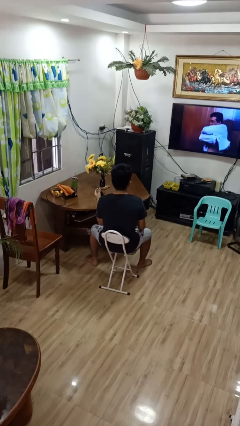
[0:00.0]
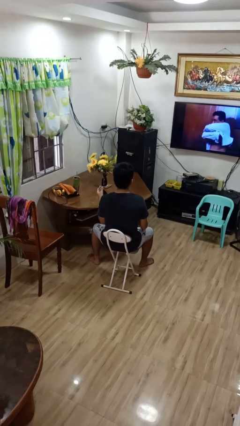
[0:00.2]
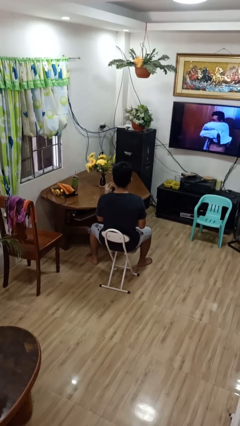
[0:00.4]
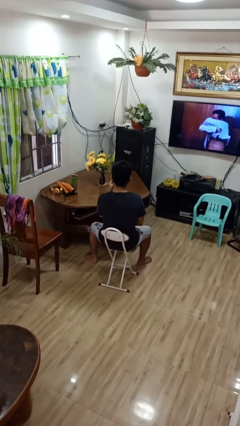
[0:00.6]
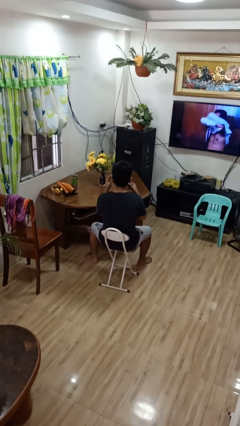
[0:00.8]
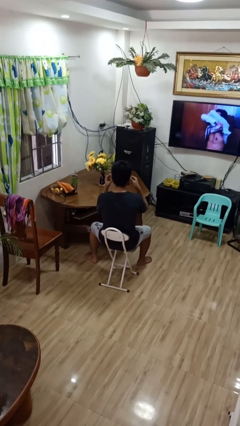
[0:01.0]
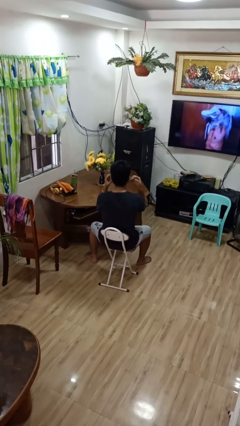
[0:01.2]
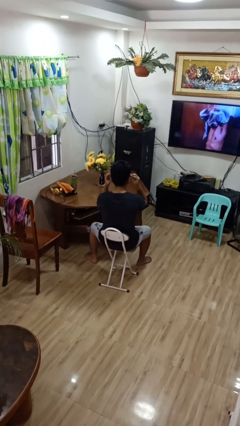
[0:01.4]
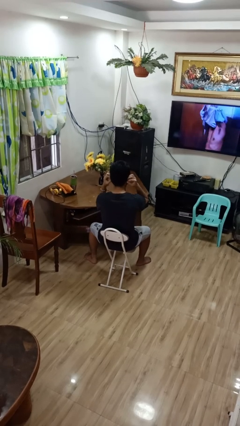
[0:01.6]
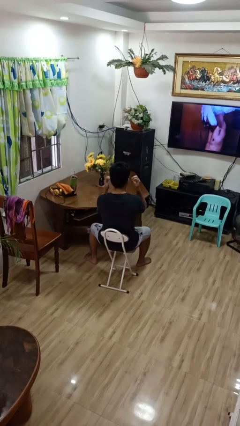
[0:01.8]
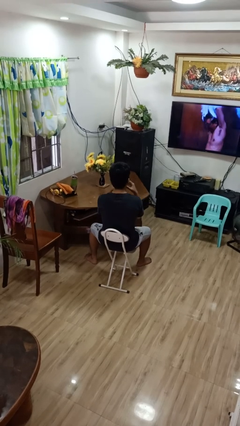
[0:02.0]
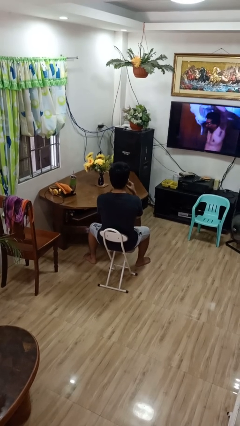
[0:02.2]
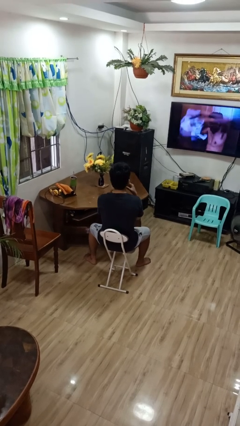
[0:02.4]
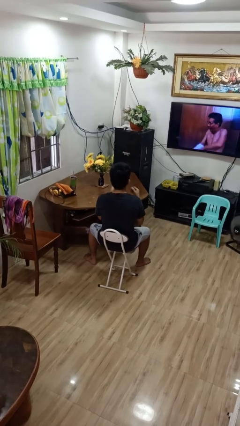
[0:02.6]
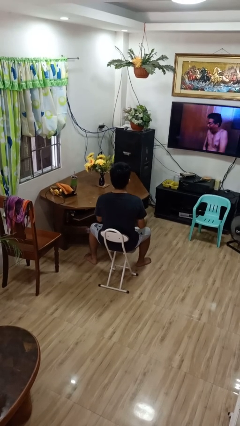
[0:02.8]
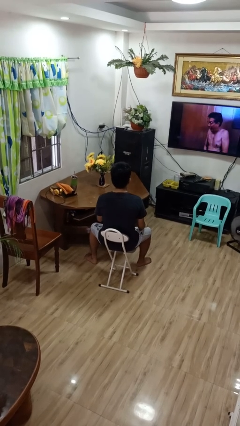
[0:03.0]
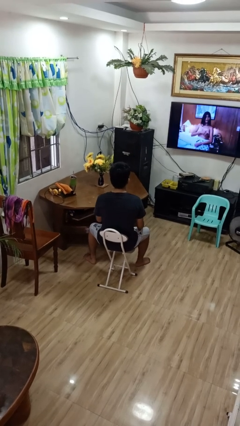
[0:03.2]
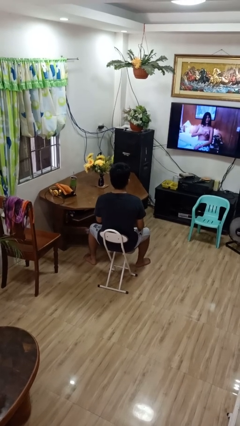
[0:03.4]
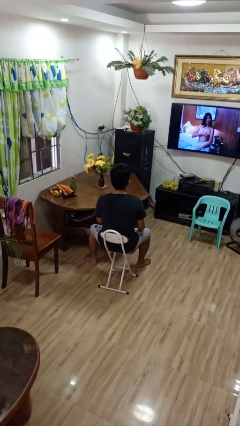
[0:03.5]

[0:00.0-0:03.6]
person puts on facemask

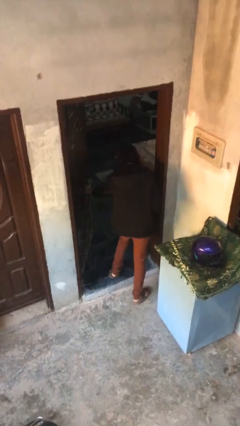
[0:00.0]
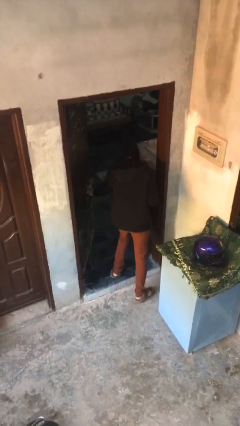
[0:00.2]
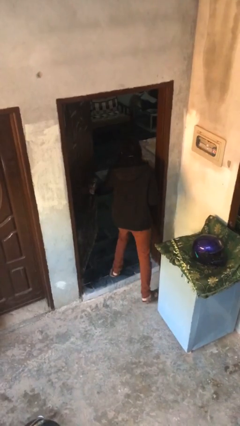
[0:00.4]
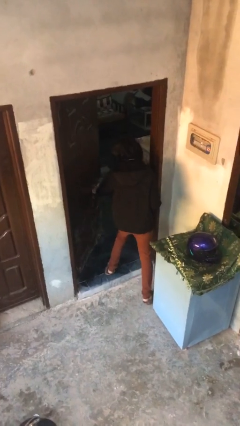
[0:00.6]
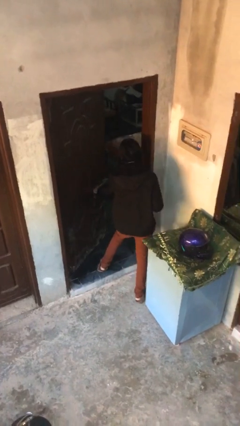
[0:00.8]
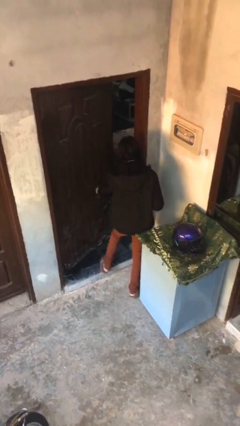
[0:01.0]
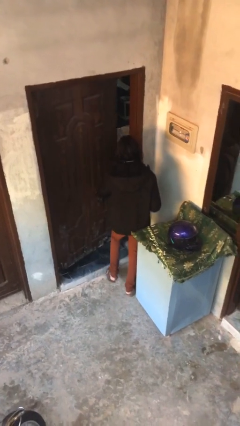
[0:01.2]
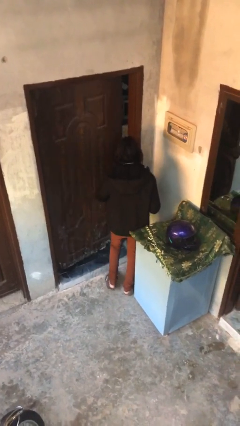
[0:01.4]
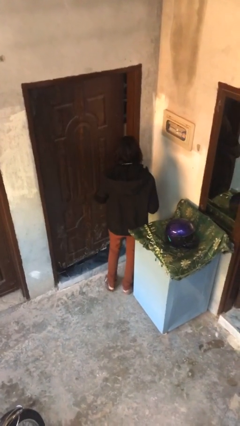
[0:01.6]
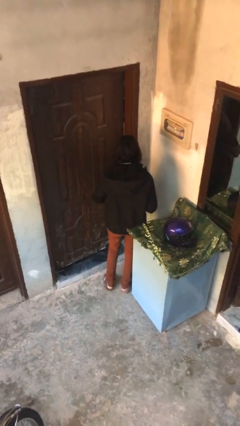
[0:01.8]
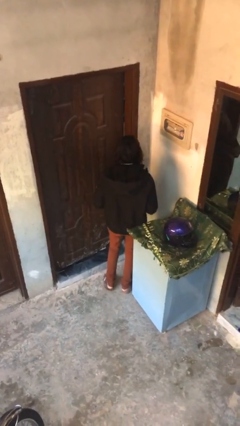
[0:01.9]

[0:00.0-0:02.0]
person closes facility door

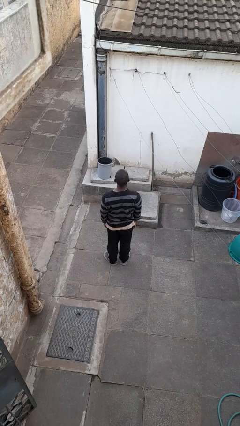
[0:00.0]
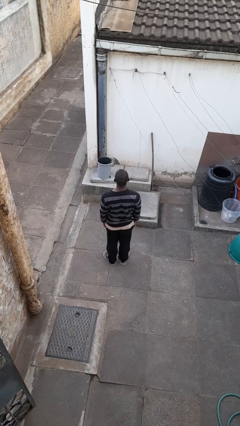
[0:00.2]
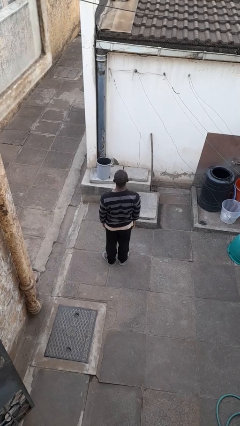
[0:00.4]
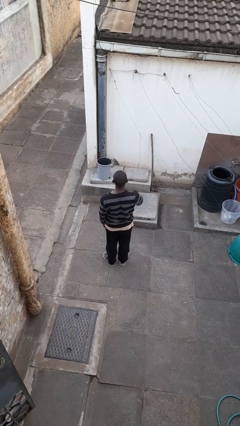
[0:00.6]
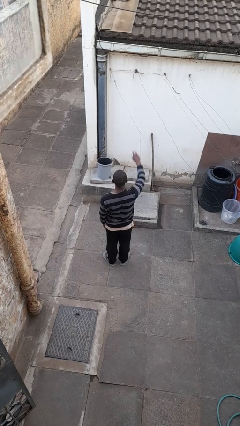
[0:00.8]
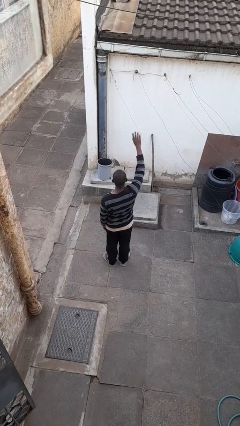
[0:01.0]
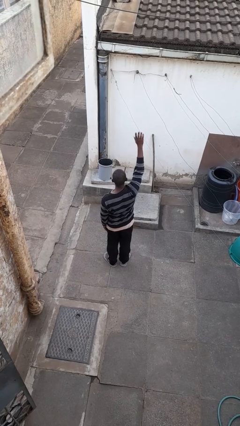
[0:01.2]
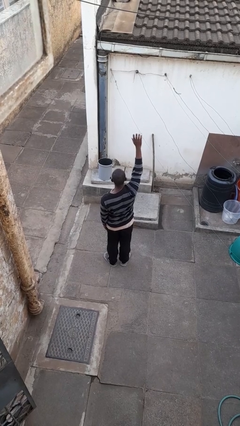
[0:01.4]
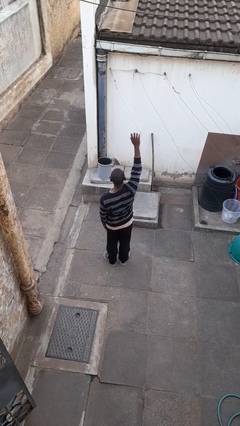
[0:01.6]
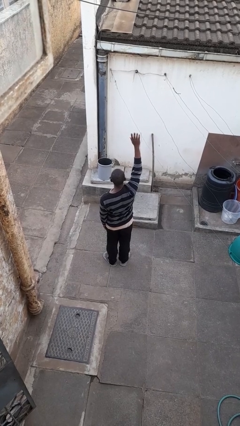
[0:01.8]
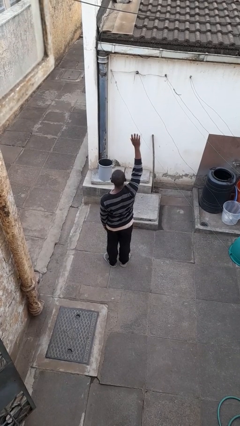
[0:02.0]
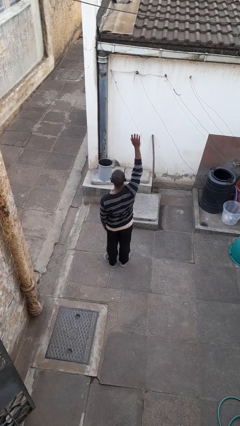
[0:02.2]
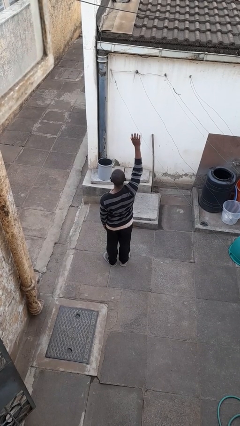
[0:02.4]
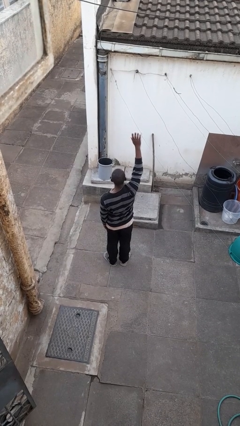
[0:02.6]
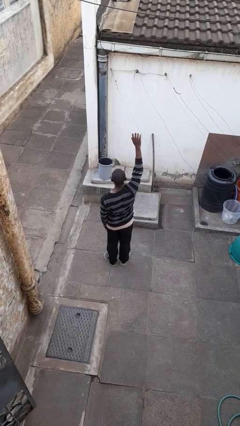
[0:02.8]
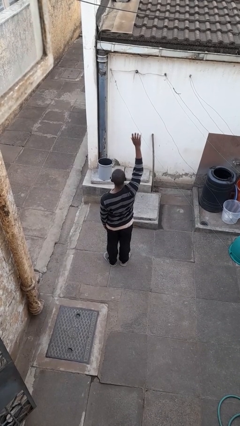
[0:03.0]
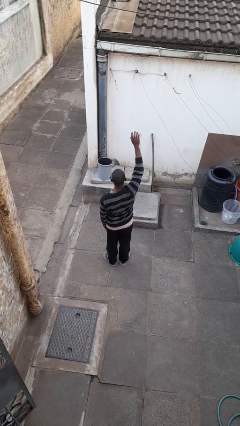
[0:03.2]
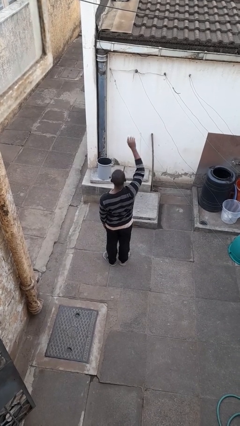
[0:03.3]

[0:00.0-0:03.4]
person gestures raise hand

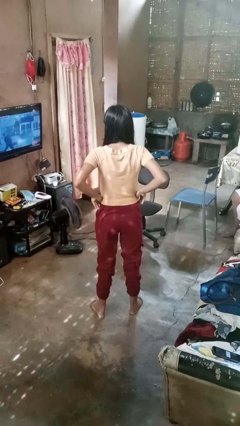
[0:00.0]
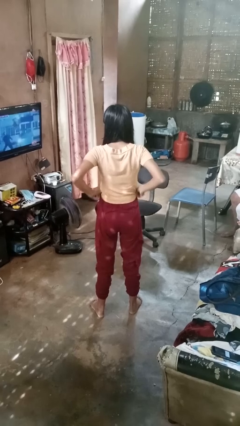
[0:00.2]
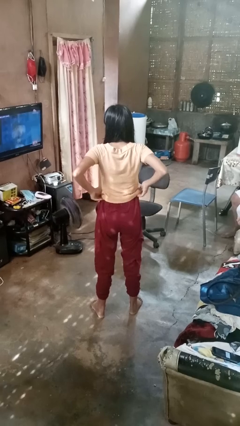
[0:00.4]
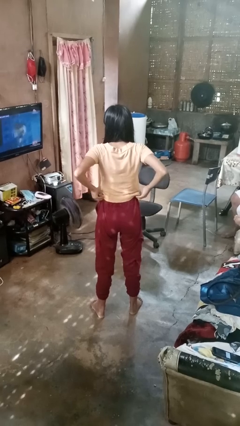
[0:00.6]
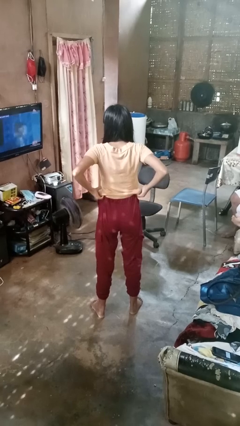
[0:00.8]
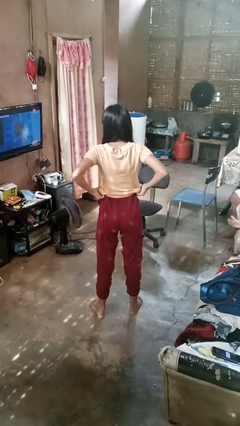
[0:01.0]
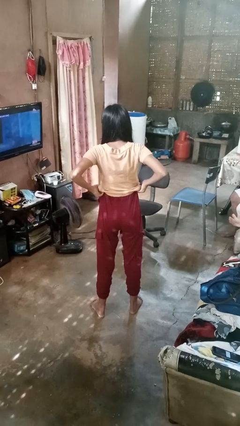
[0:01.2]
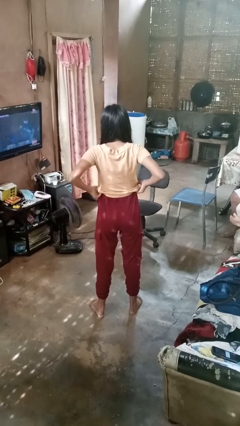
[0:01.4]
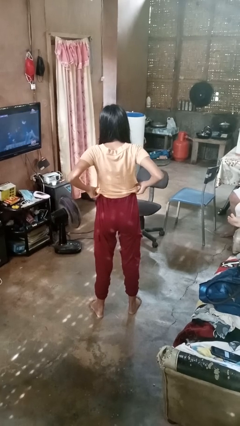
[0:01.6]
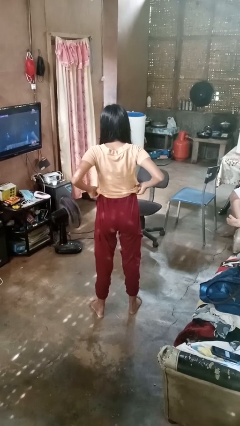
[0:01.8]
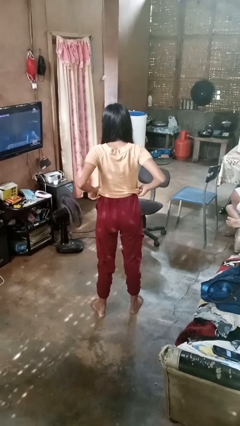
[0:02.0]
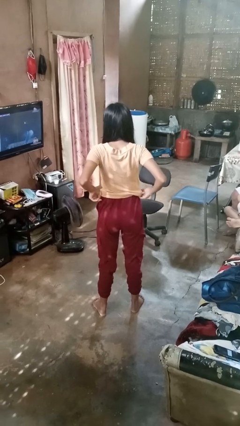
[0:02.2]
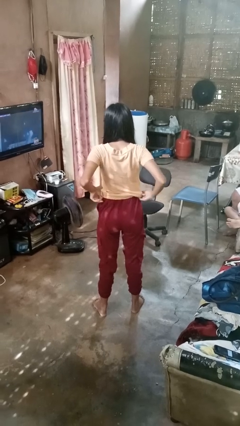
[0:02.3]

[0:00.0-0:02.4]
person hikes up pants

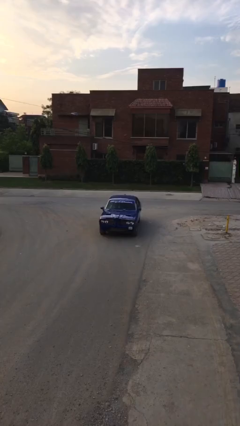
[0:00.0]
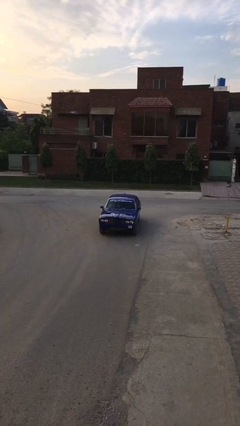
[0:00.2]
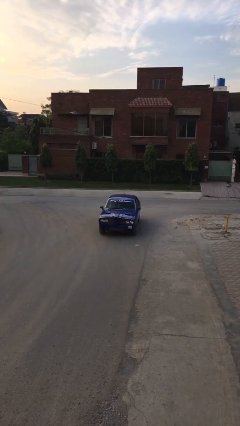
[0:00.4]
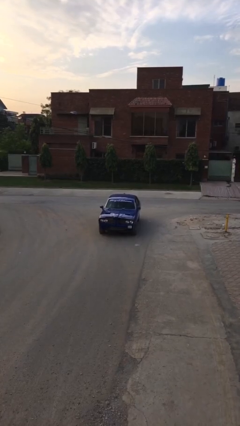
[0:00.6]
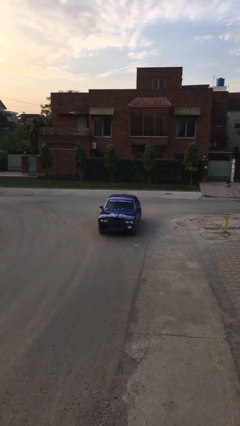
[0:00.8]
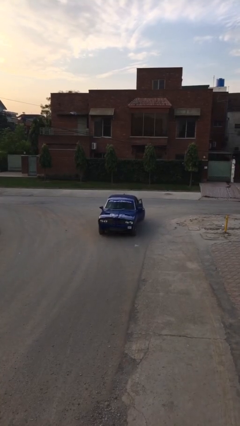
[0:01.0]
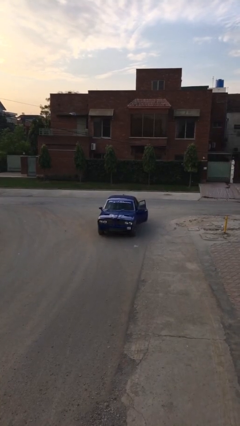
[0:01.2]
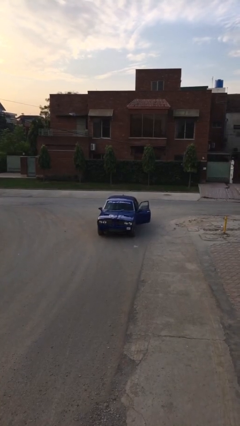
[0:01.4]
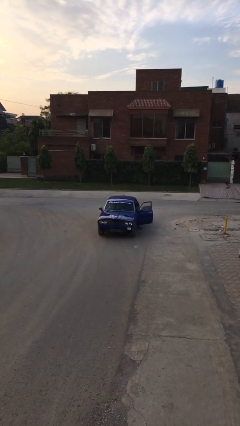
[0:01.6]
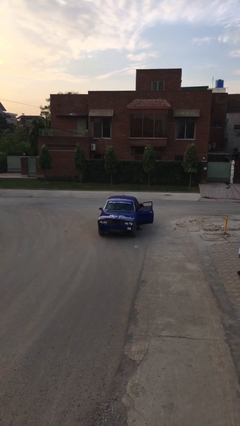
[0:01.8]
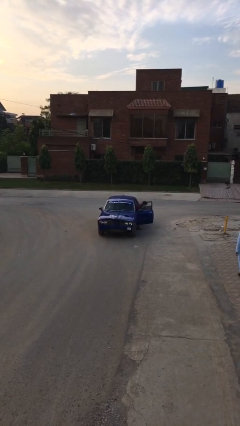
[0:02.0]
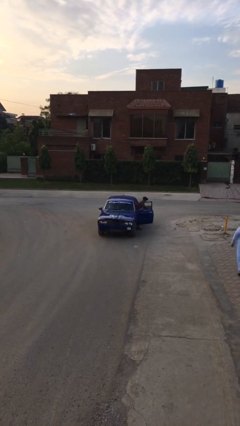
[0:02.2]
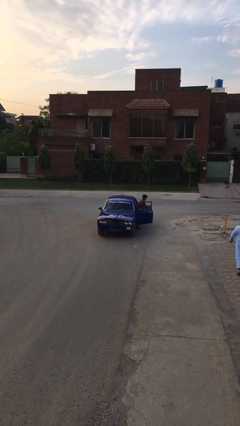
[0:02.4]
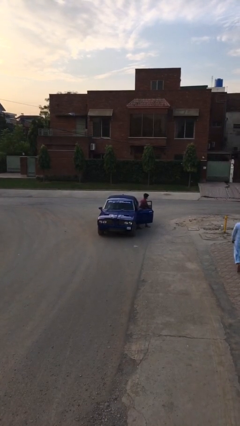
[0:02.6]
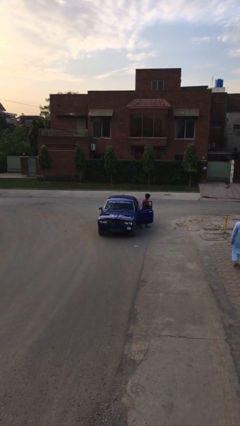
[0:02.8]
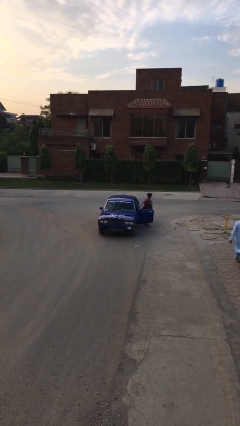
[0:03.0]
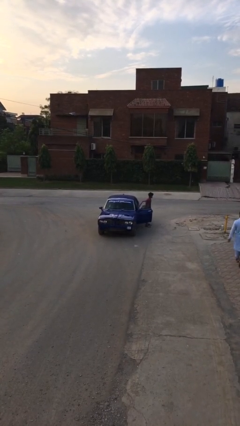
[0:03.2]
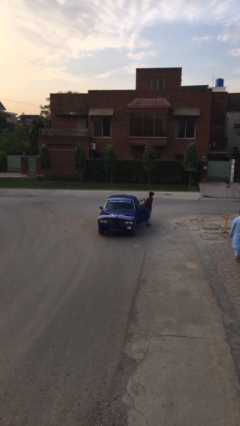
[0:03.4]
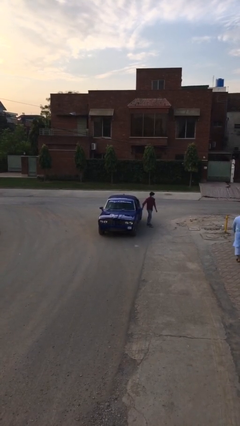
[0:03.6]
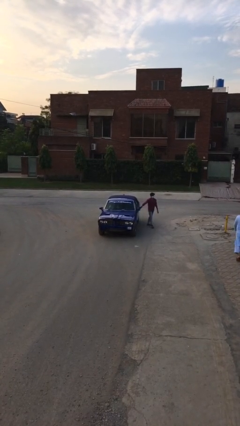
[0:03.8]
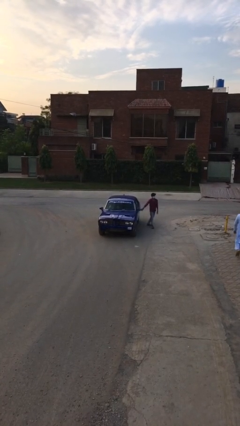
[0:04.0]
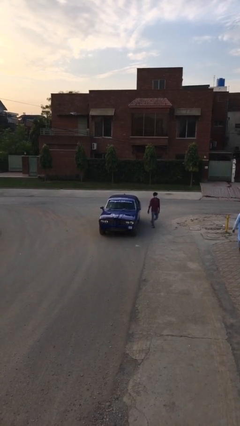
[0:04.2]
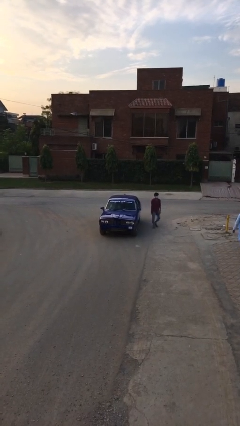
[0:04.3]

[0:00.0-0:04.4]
car drops off person

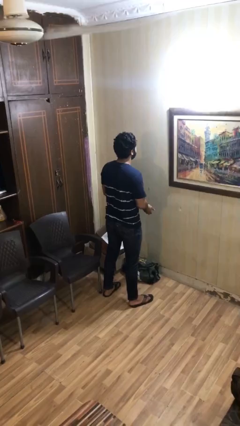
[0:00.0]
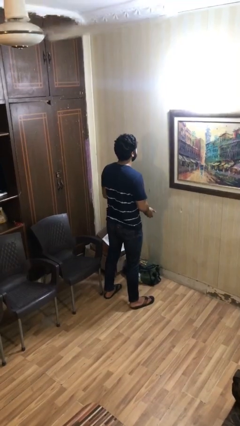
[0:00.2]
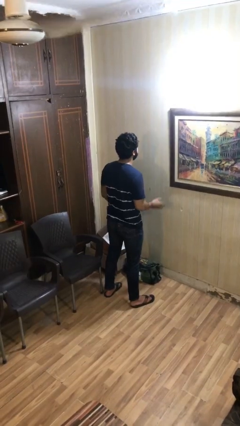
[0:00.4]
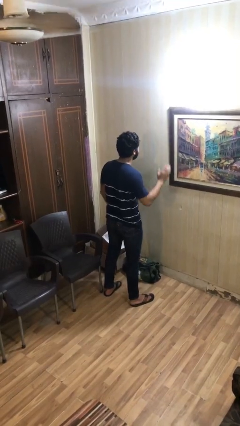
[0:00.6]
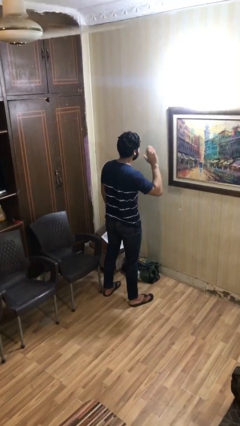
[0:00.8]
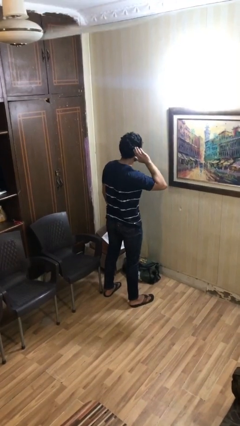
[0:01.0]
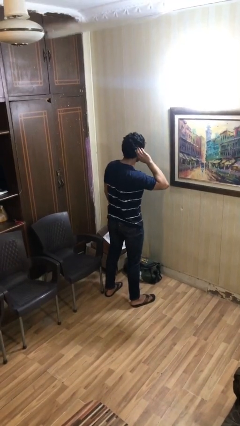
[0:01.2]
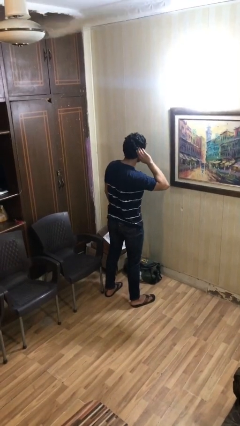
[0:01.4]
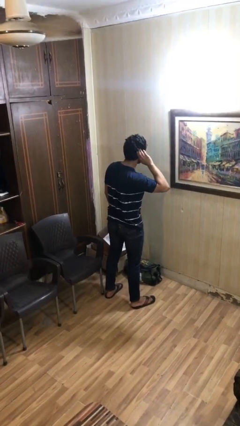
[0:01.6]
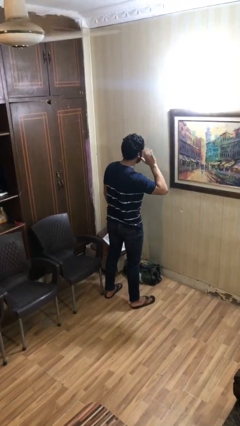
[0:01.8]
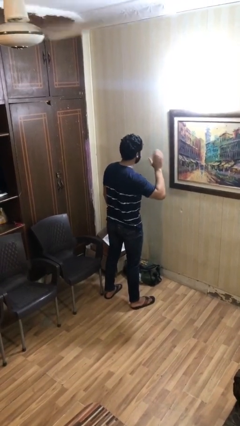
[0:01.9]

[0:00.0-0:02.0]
person gestures listen closely
